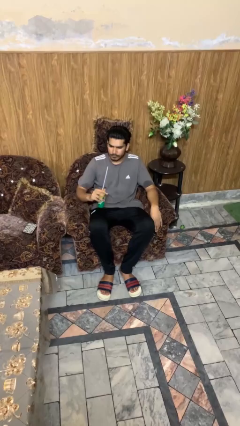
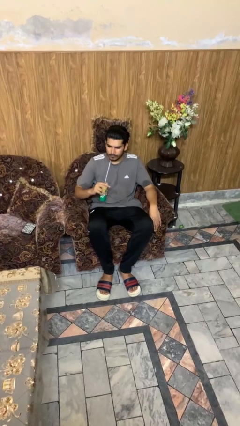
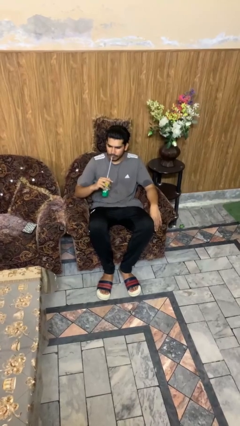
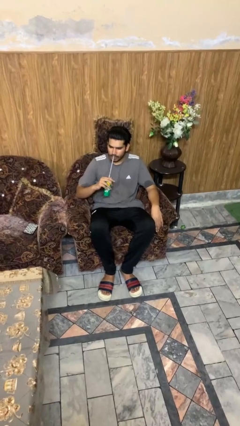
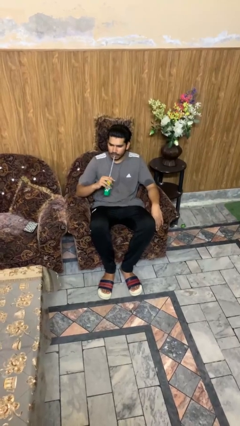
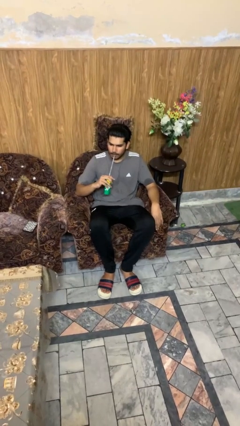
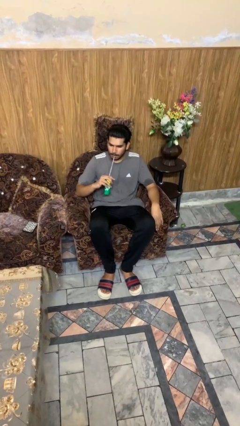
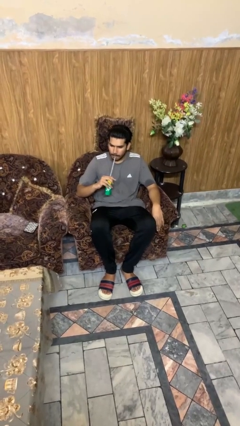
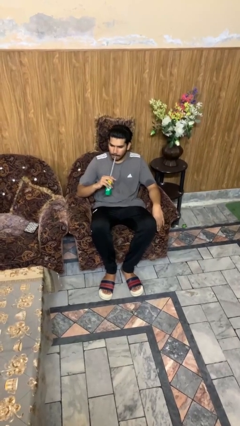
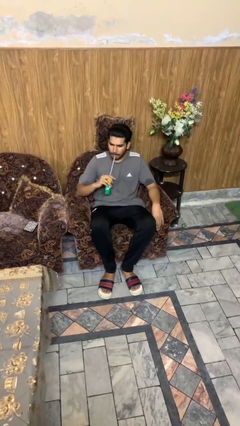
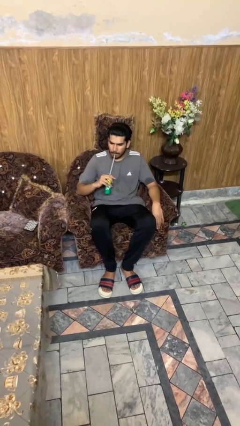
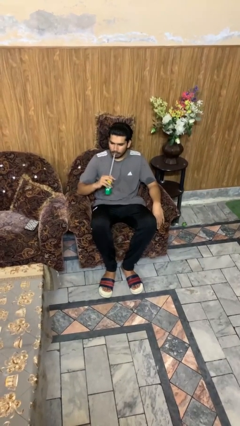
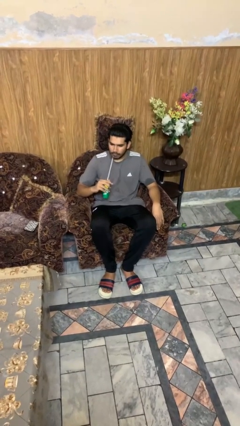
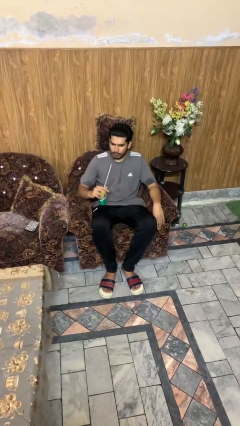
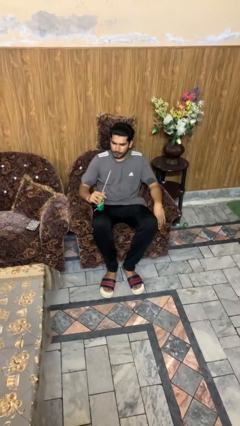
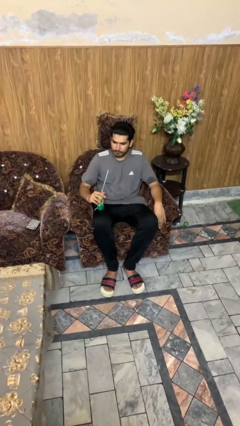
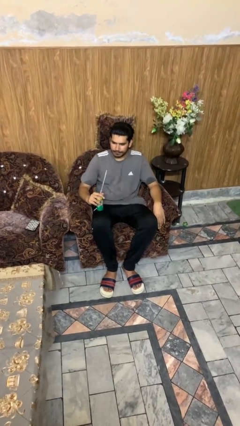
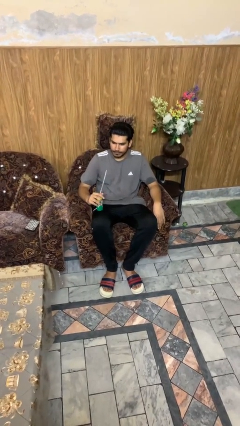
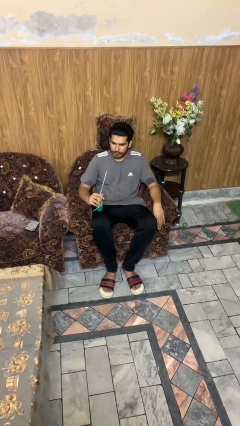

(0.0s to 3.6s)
person drinks from straw

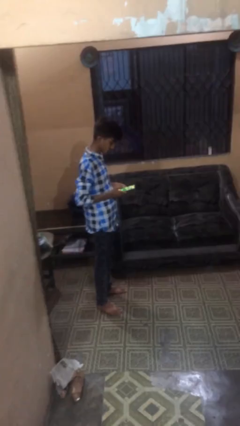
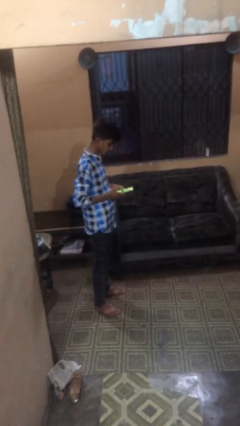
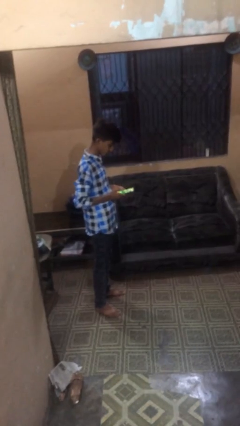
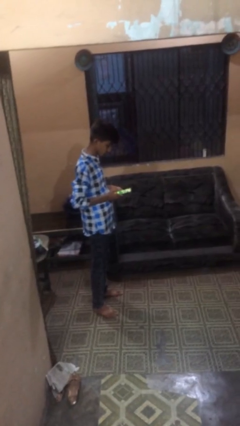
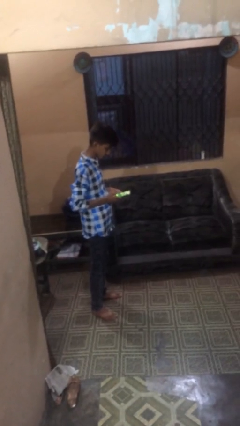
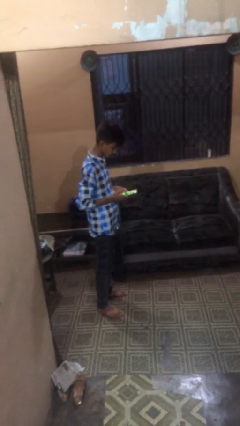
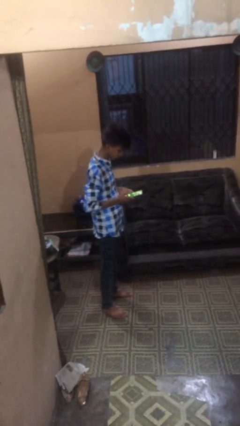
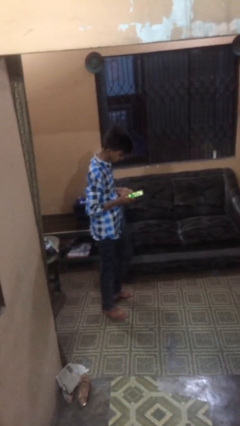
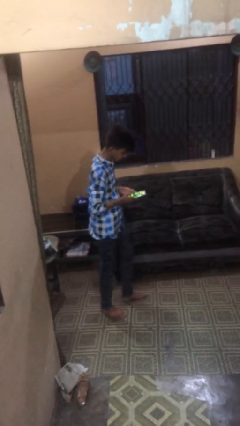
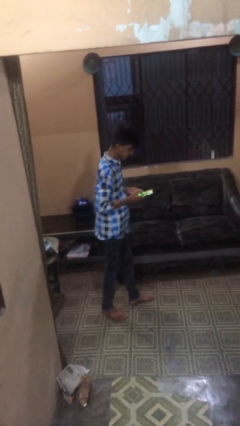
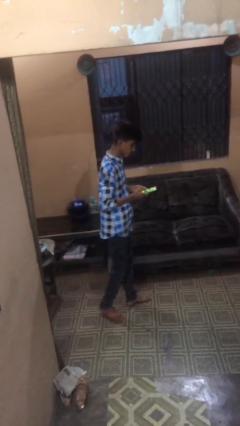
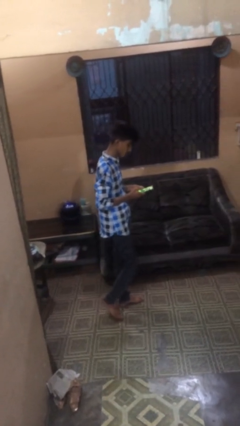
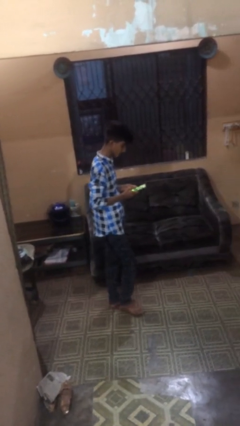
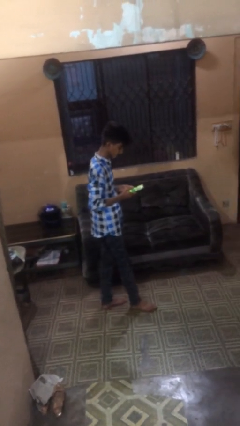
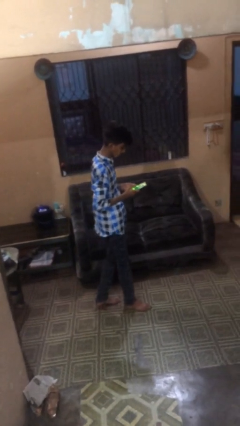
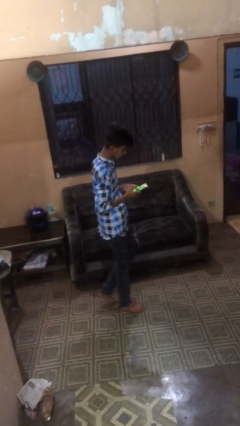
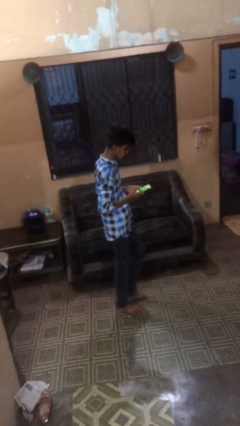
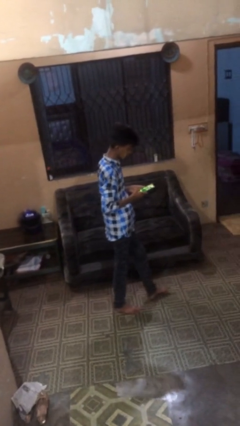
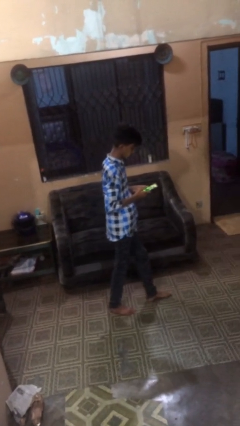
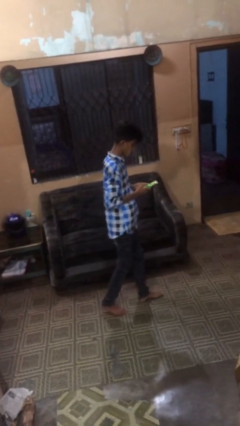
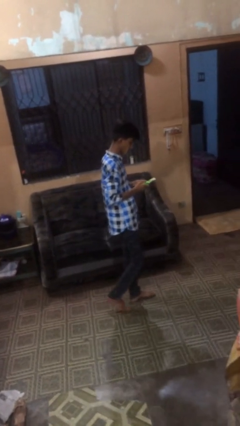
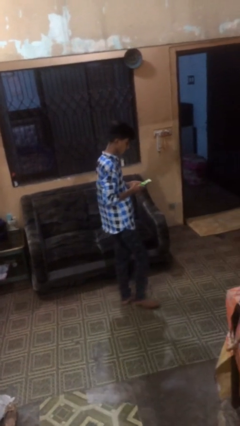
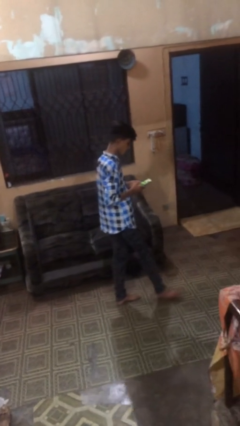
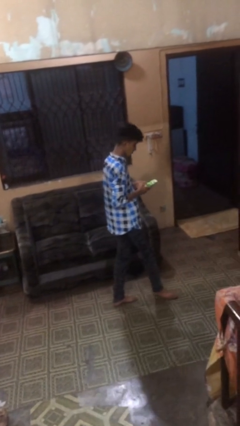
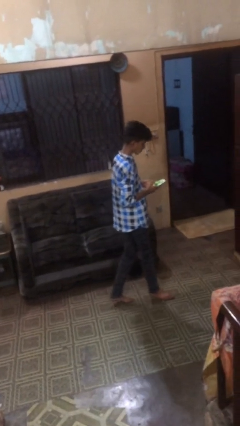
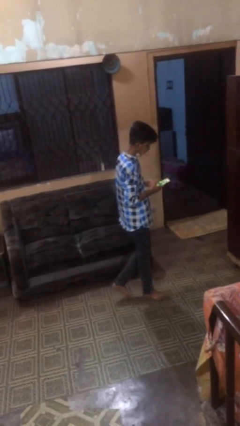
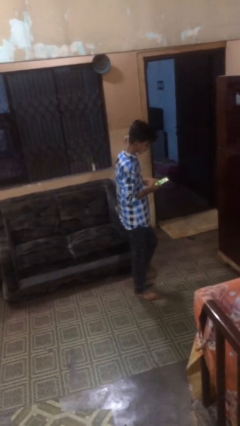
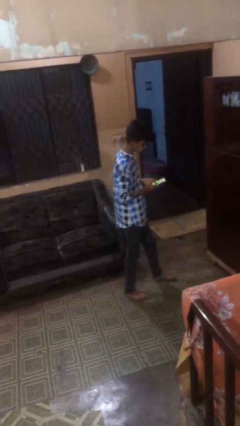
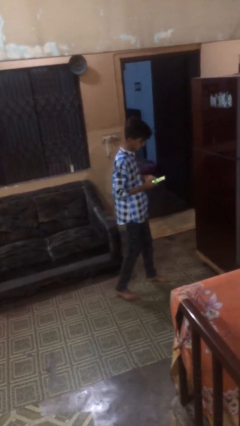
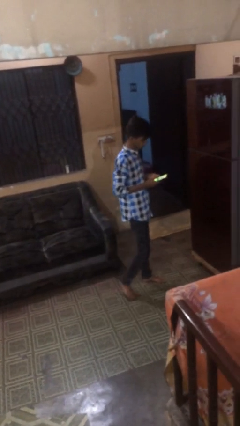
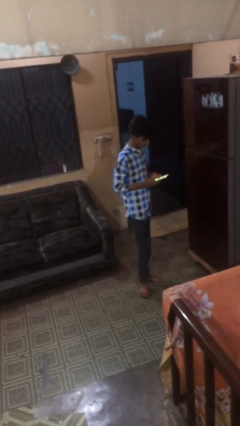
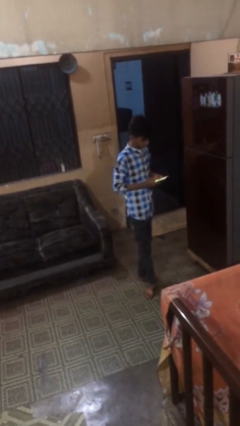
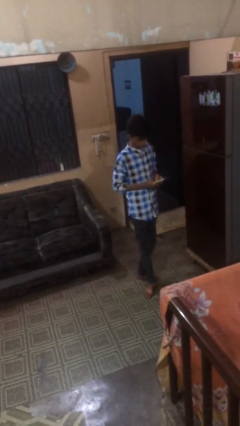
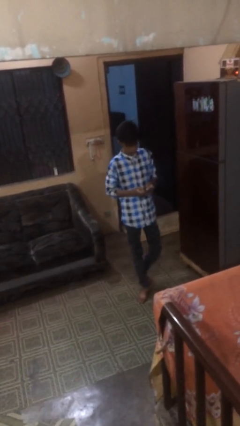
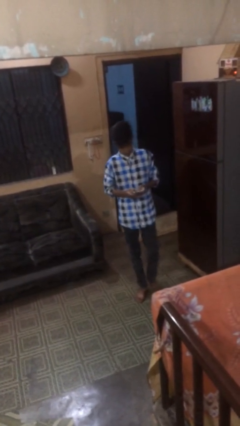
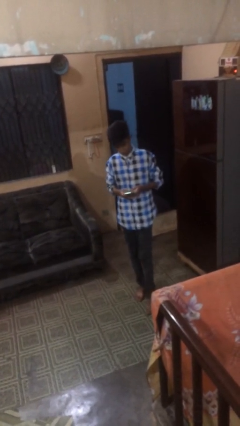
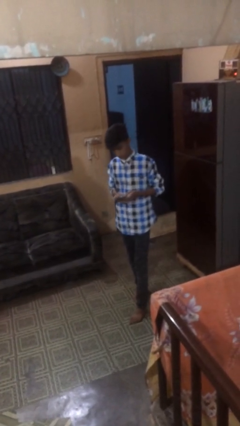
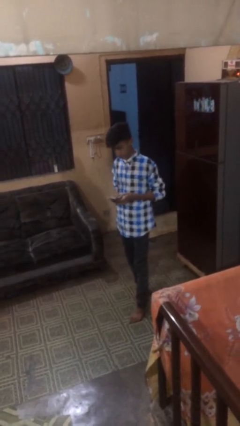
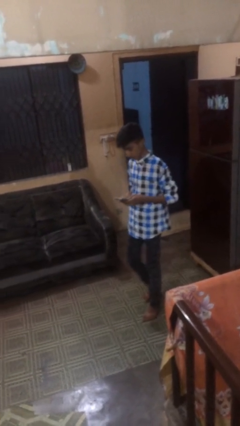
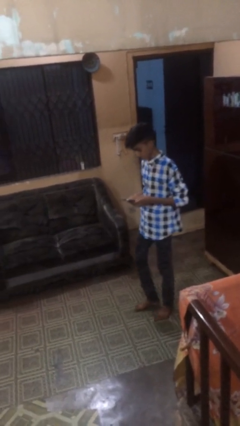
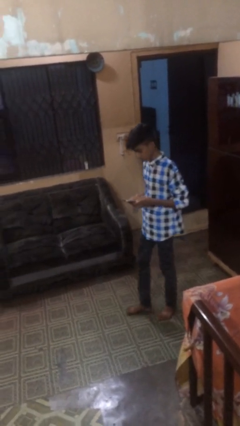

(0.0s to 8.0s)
person texts on phone

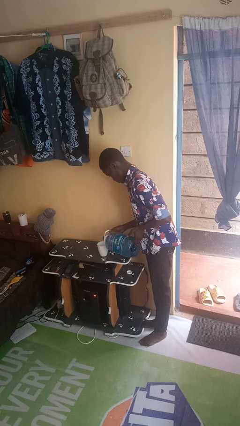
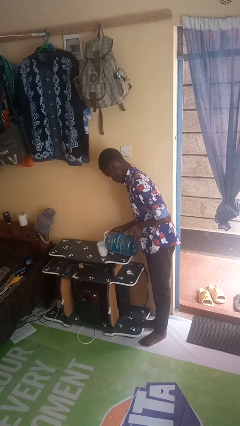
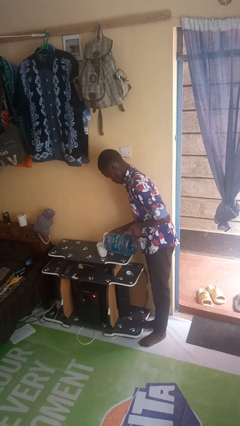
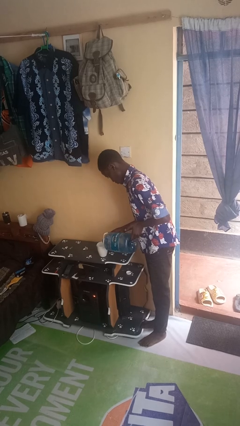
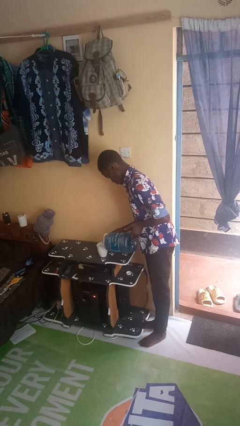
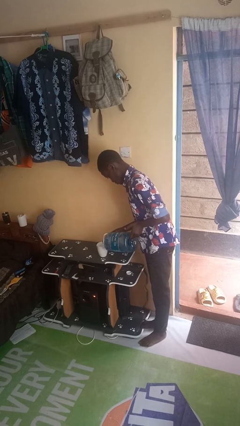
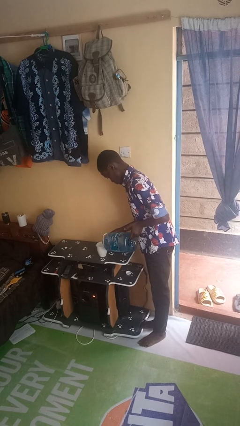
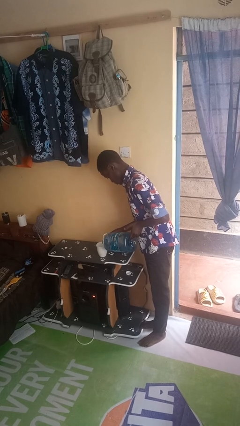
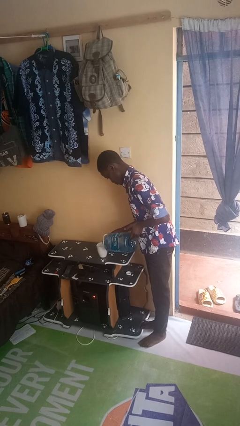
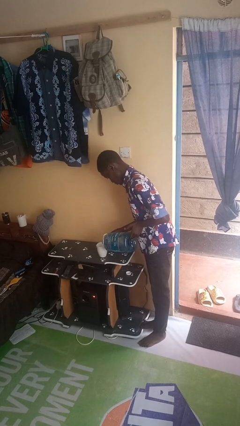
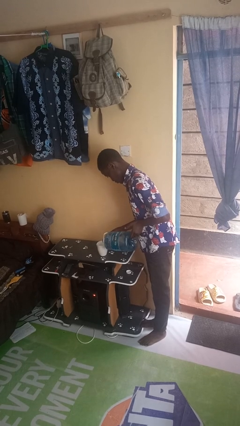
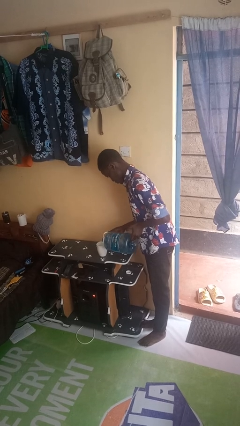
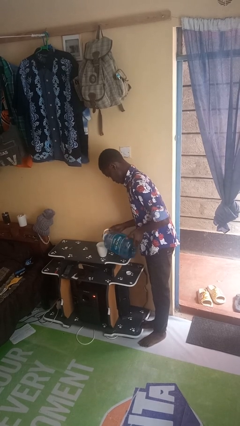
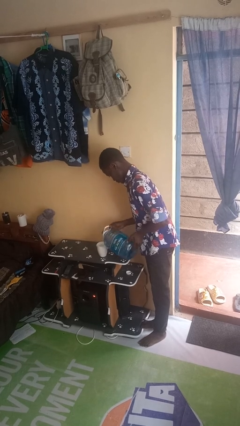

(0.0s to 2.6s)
person pours liquid into cup

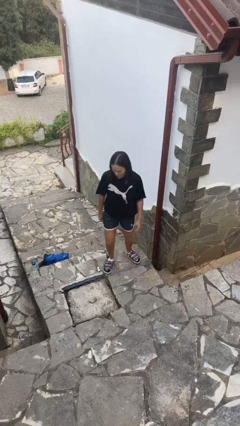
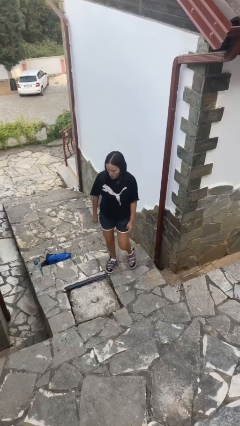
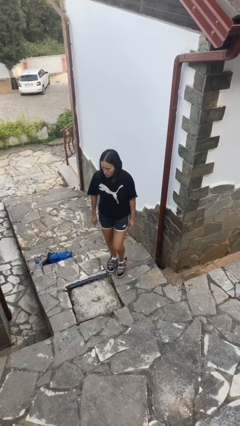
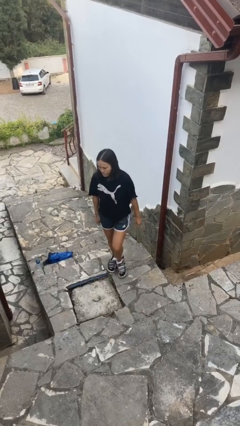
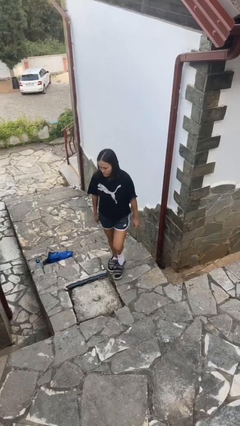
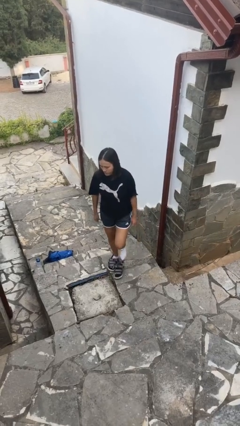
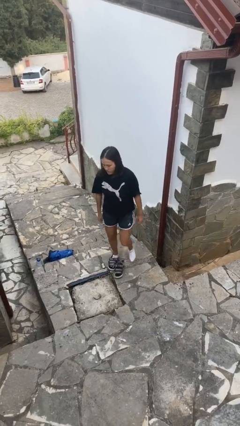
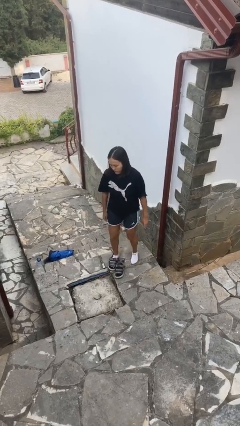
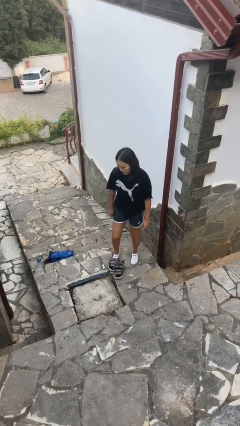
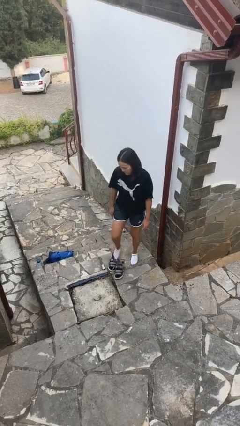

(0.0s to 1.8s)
person takes off shoes

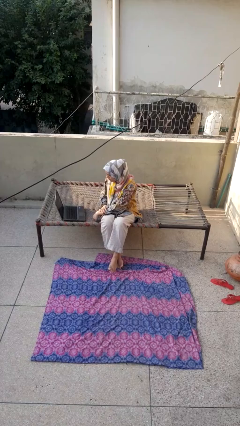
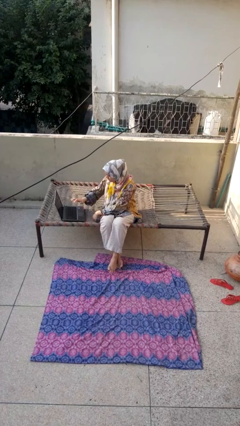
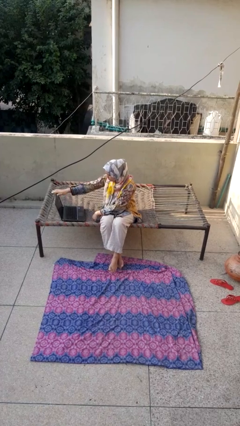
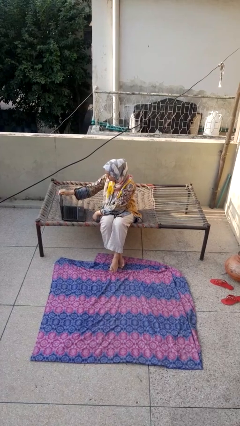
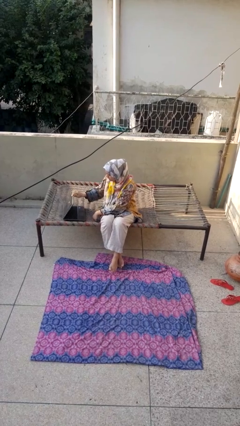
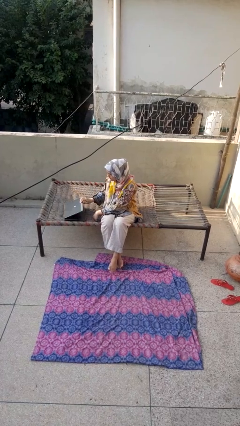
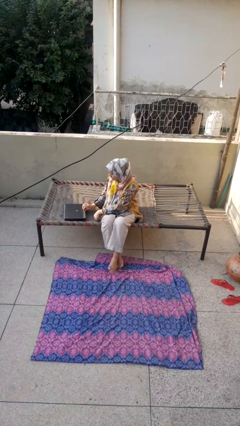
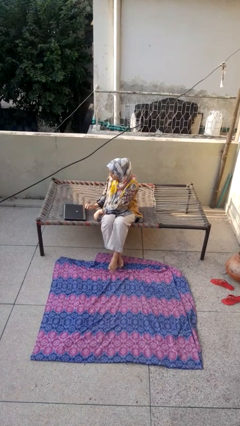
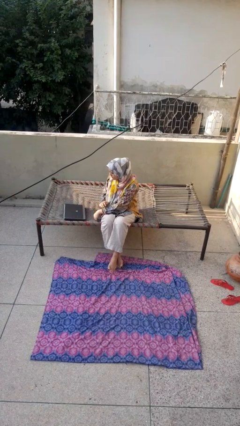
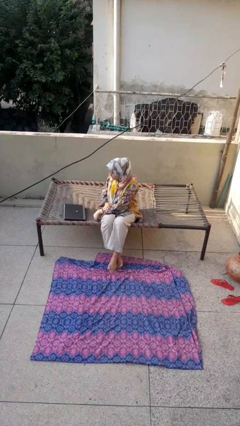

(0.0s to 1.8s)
person closes laptop

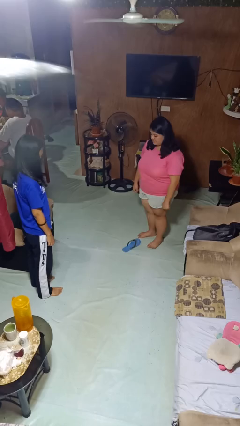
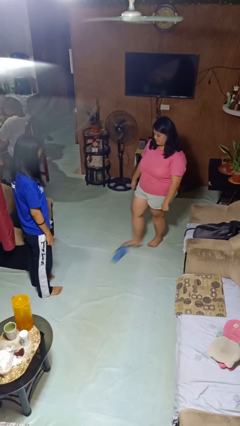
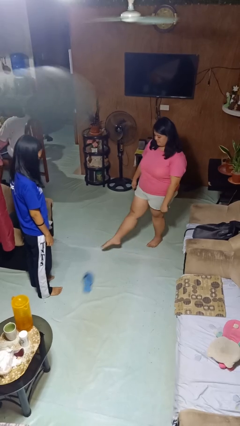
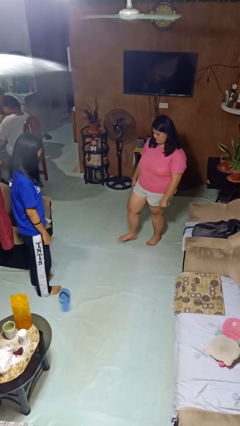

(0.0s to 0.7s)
person kicks object to person
